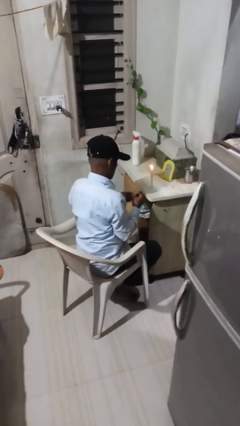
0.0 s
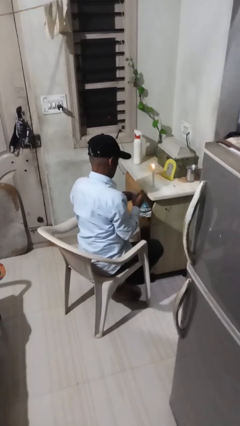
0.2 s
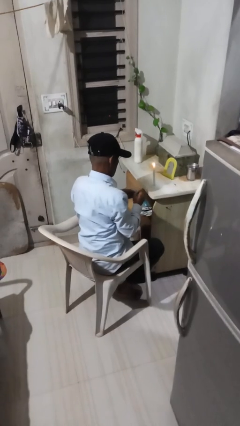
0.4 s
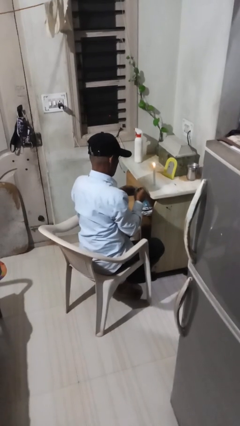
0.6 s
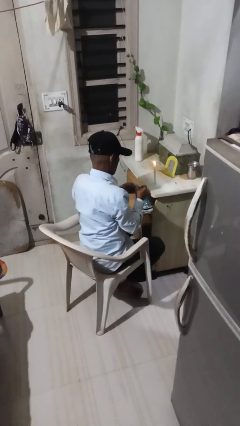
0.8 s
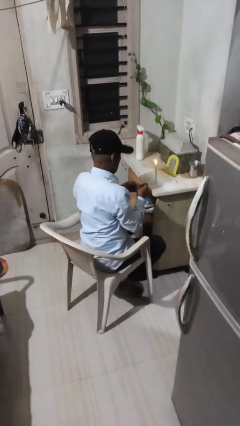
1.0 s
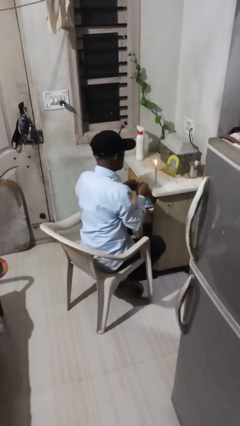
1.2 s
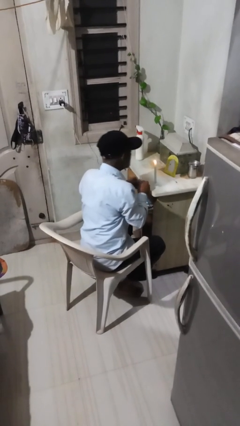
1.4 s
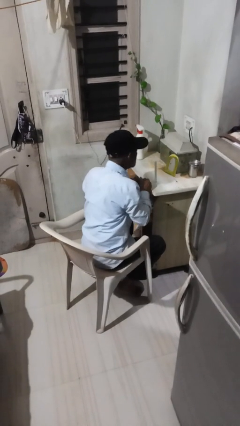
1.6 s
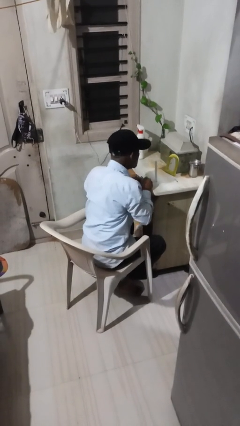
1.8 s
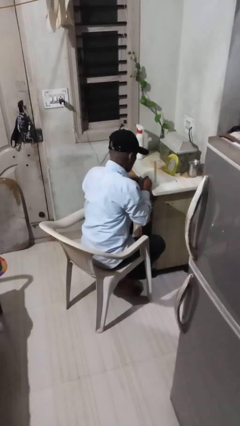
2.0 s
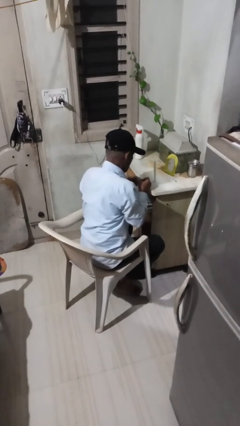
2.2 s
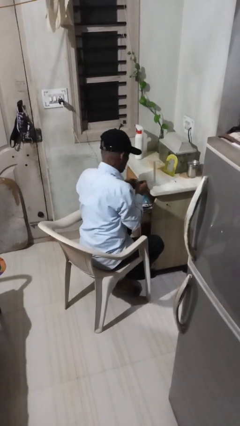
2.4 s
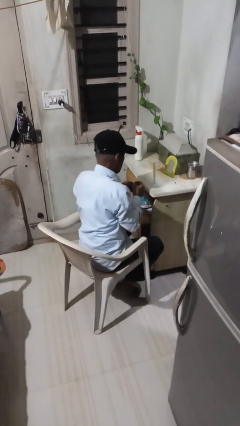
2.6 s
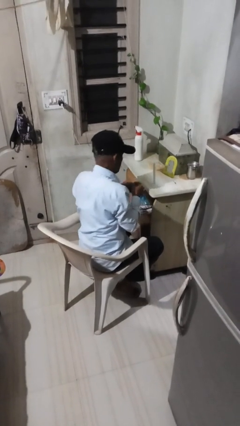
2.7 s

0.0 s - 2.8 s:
person extinguishes candle

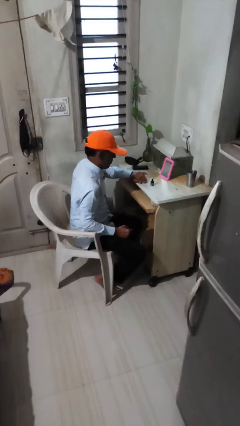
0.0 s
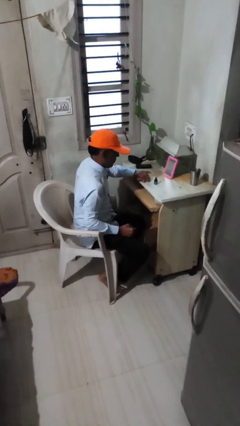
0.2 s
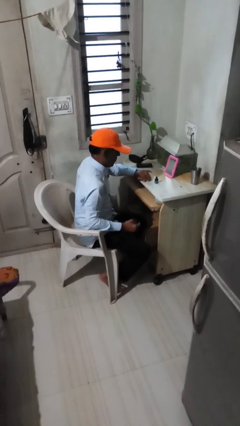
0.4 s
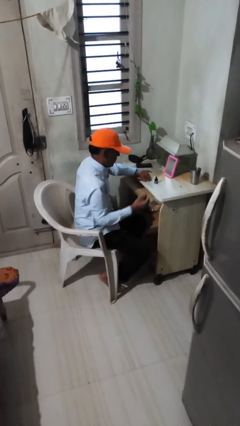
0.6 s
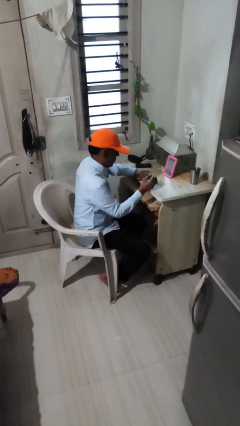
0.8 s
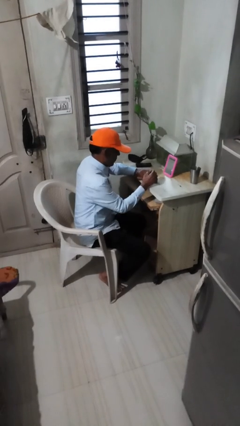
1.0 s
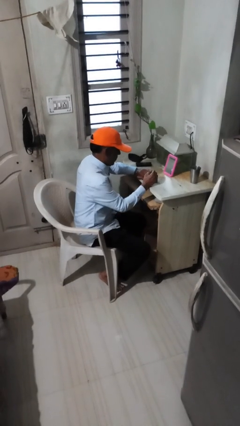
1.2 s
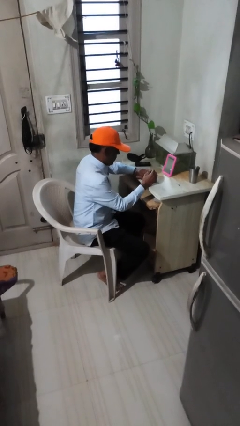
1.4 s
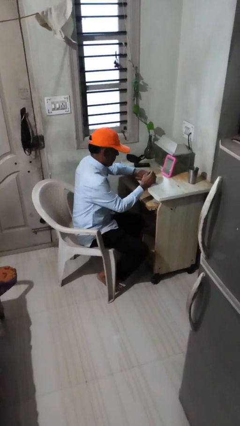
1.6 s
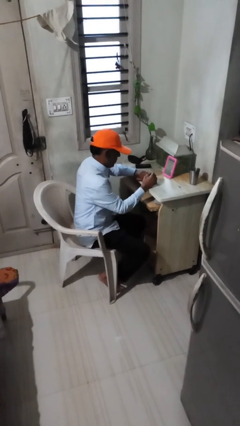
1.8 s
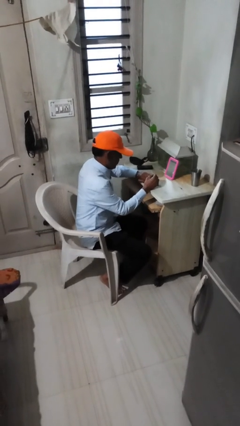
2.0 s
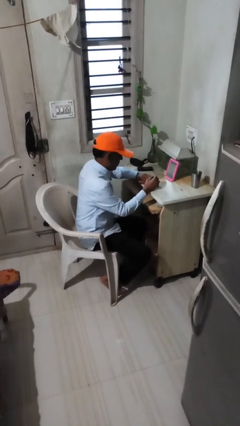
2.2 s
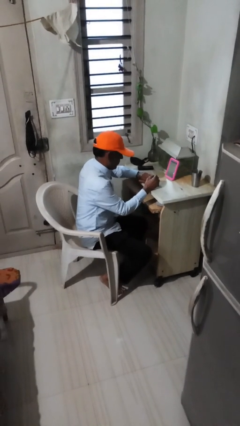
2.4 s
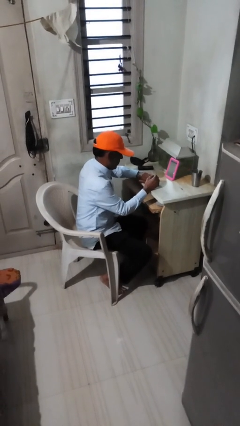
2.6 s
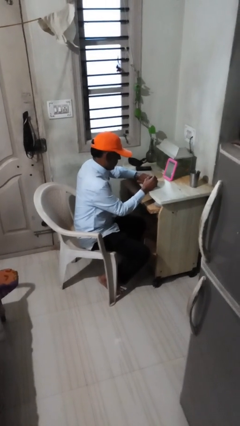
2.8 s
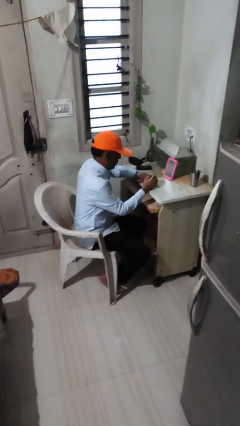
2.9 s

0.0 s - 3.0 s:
person paints fingernails

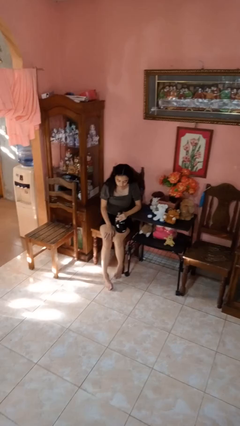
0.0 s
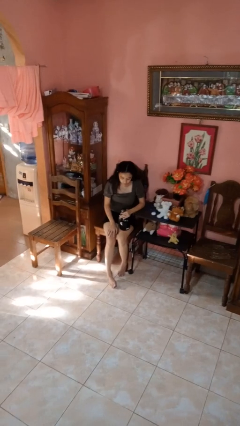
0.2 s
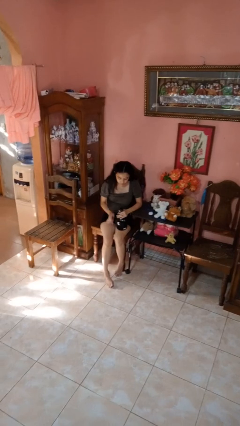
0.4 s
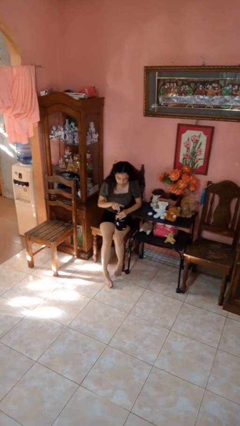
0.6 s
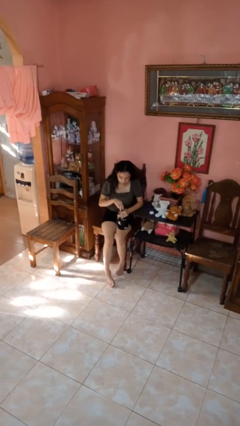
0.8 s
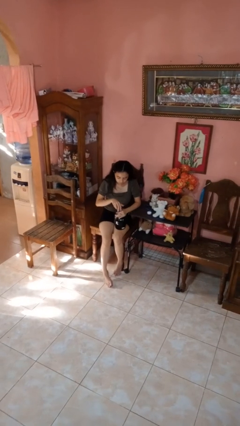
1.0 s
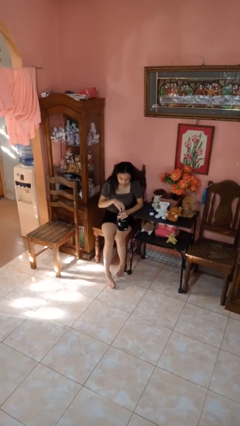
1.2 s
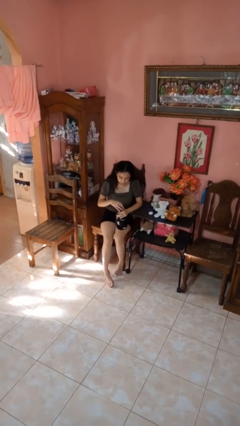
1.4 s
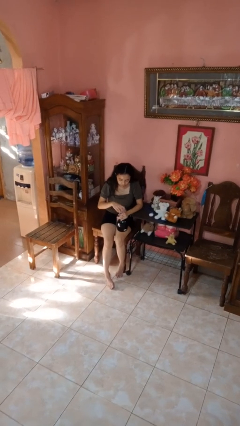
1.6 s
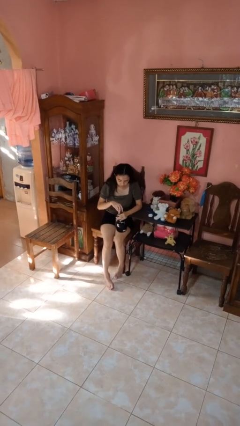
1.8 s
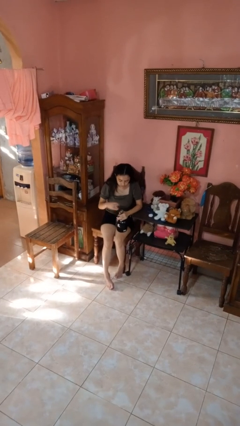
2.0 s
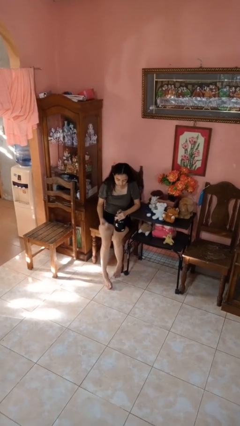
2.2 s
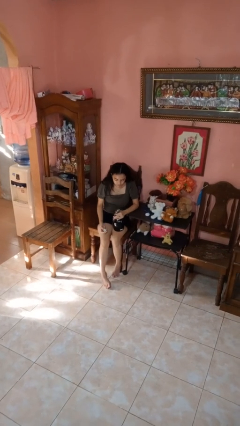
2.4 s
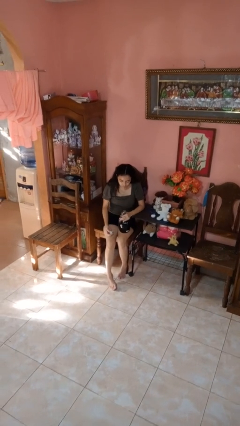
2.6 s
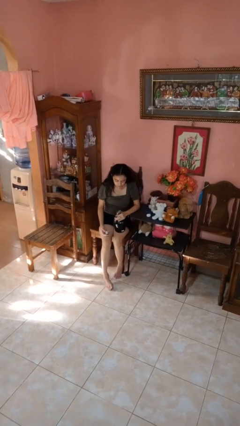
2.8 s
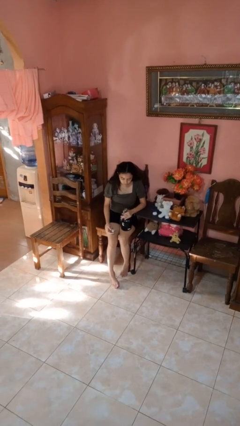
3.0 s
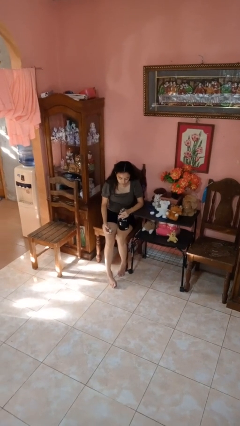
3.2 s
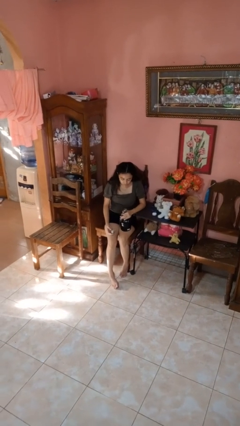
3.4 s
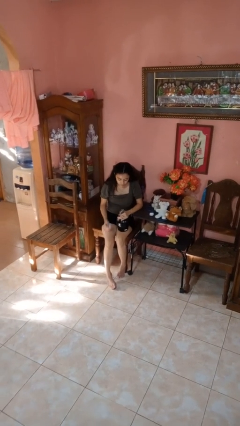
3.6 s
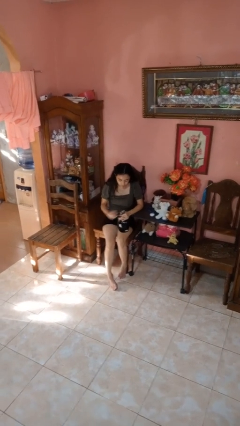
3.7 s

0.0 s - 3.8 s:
person unscrews lid from bottle

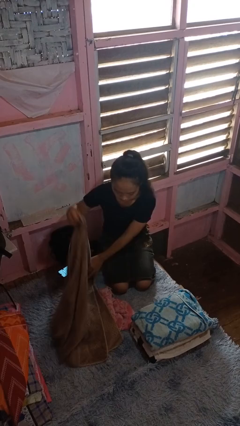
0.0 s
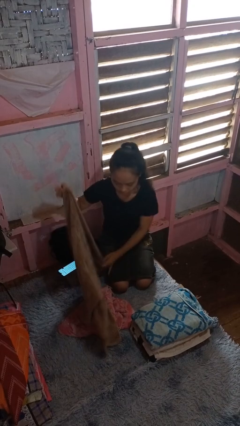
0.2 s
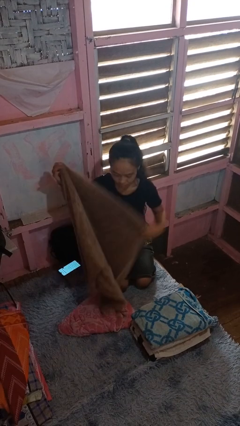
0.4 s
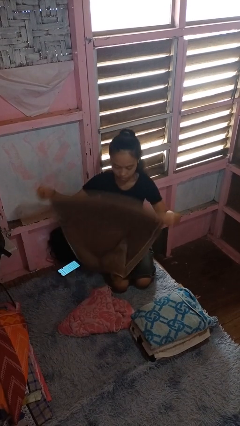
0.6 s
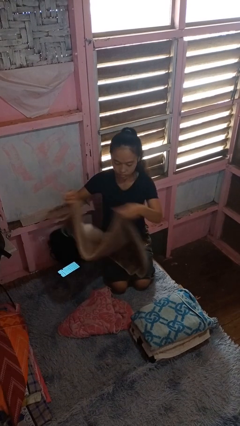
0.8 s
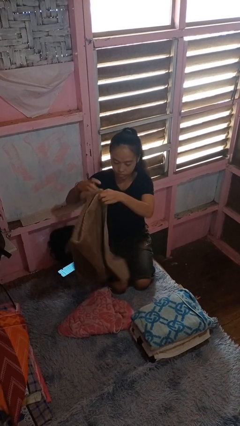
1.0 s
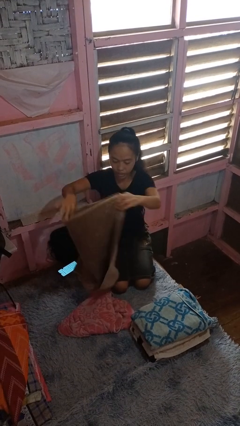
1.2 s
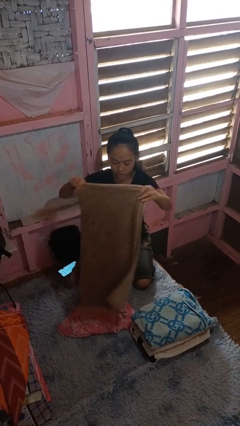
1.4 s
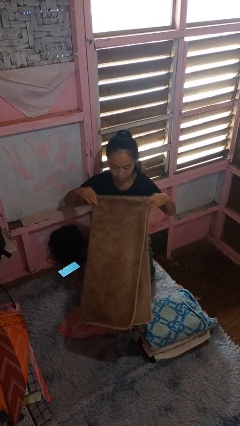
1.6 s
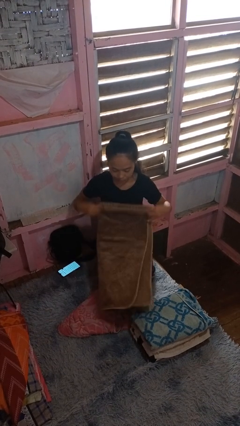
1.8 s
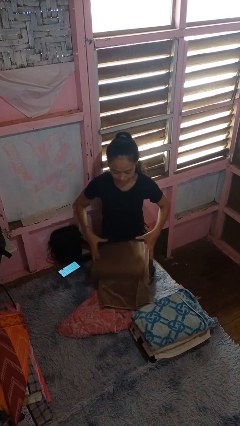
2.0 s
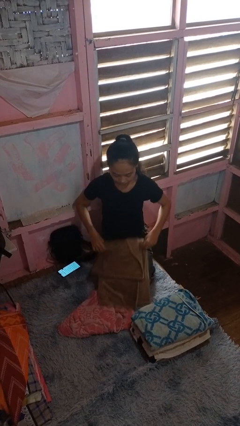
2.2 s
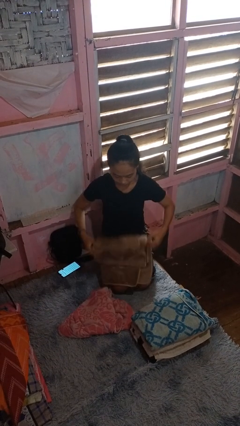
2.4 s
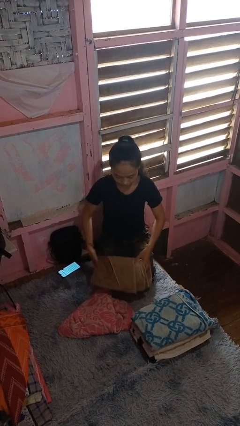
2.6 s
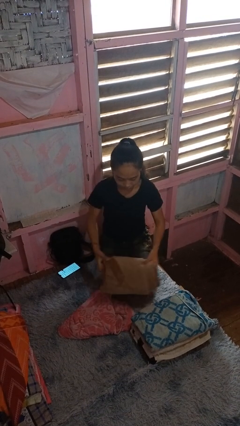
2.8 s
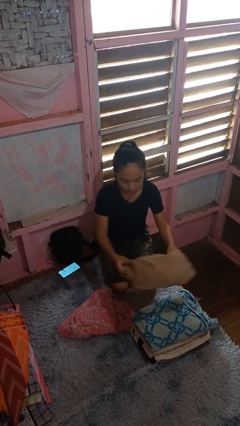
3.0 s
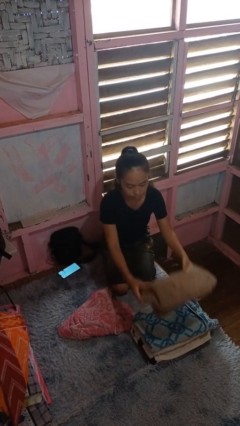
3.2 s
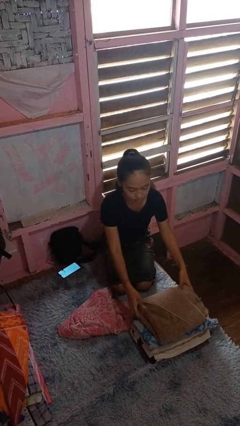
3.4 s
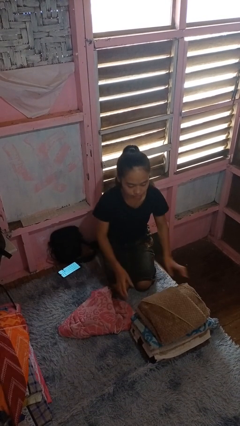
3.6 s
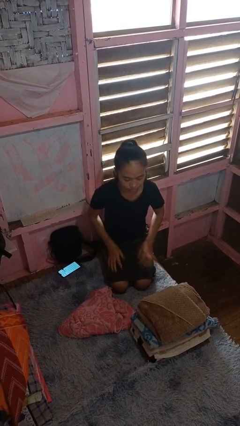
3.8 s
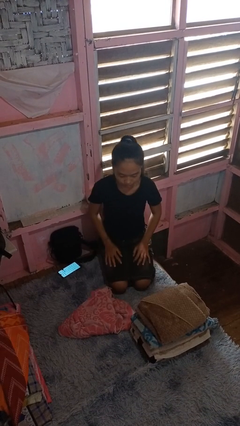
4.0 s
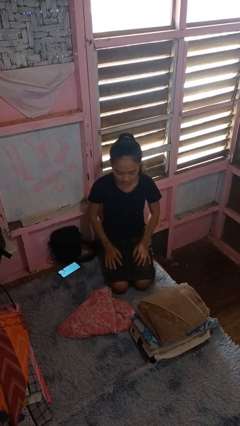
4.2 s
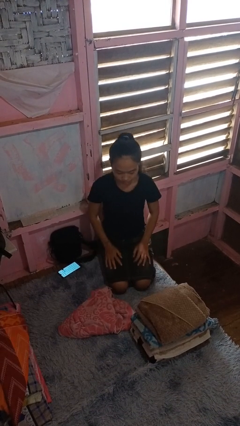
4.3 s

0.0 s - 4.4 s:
person folds towel

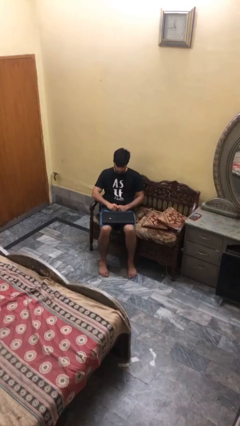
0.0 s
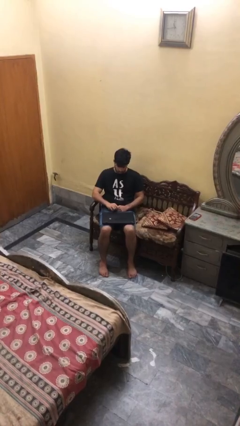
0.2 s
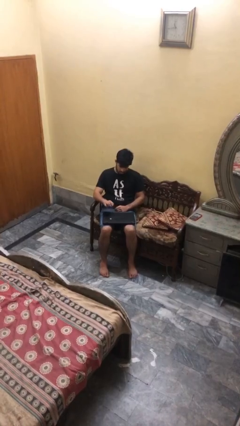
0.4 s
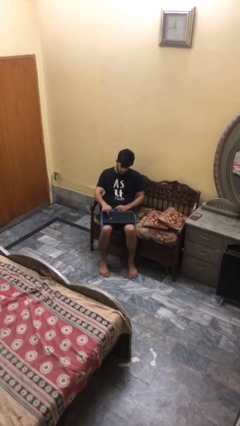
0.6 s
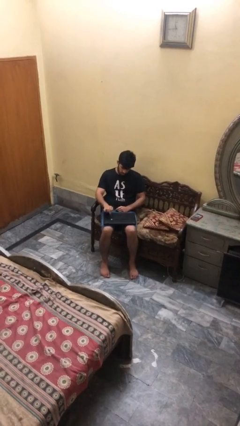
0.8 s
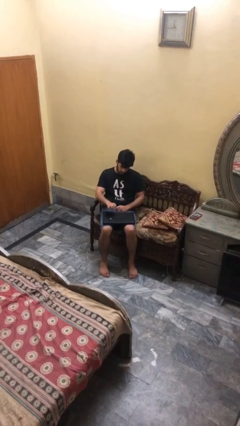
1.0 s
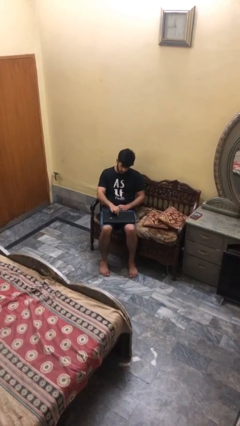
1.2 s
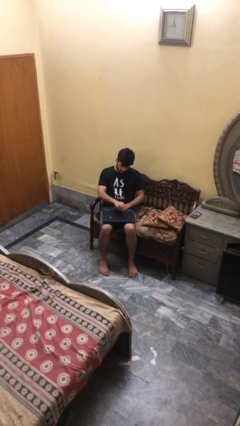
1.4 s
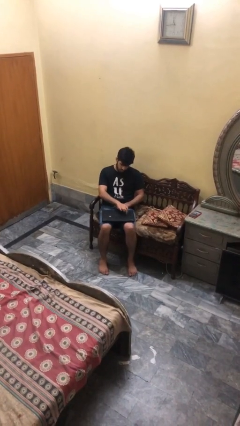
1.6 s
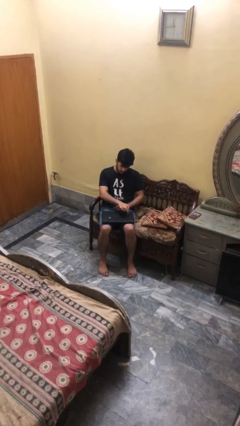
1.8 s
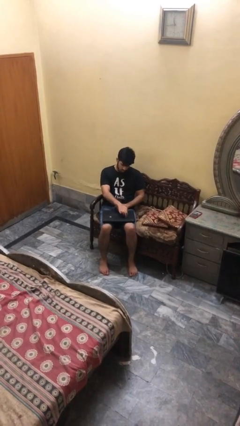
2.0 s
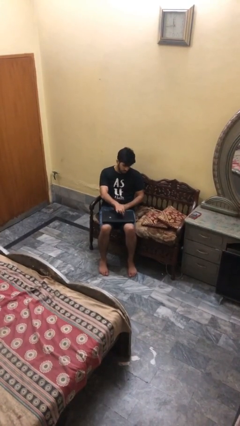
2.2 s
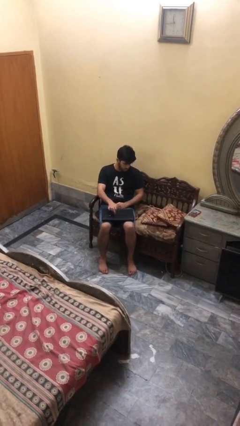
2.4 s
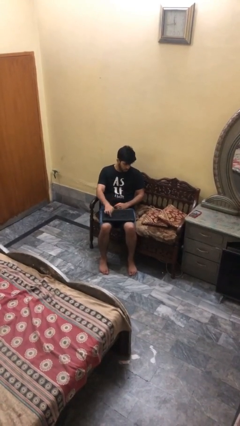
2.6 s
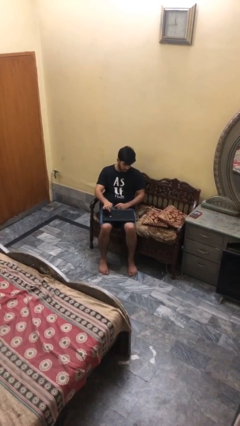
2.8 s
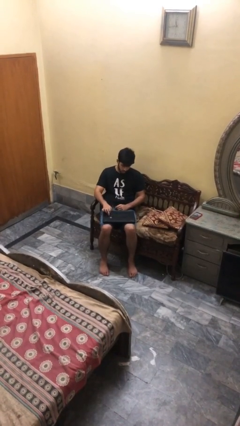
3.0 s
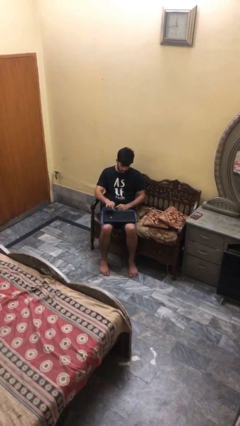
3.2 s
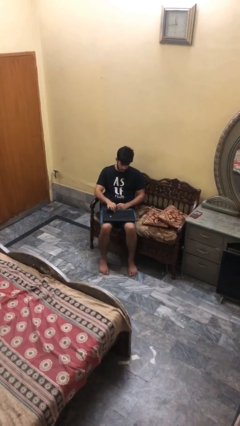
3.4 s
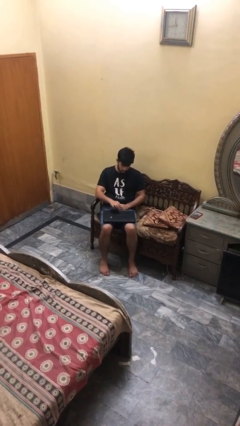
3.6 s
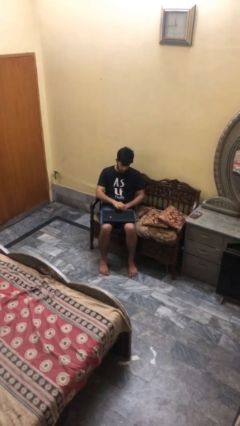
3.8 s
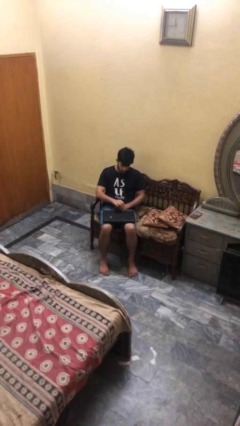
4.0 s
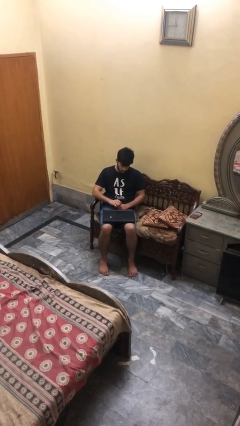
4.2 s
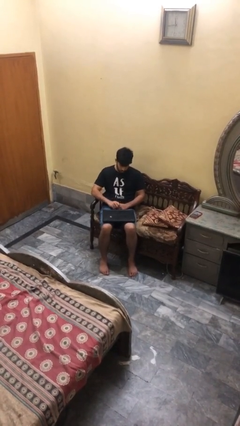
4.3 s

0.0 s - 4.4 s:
person taps object with finger
